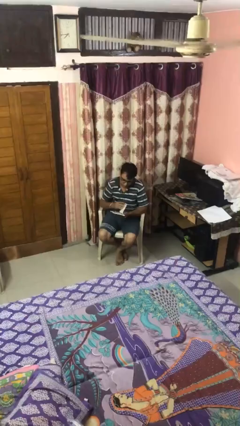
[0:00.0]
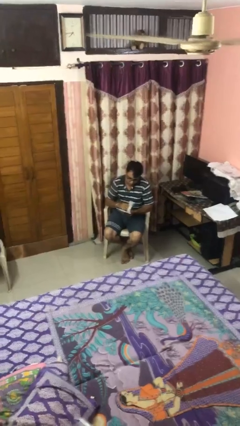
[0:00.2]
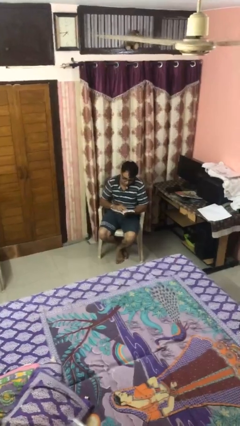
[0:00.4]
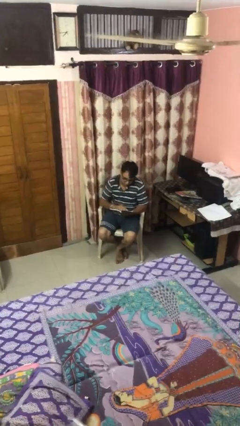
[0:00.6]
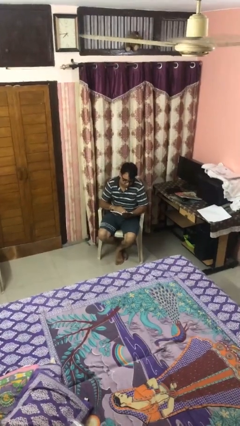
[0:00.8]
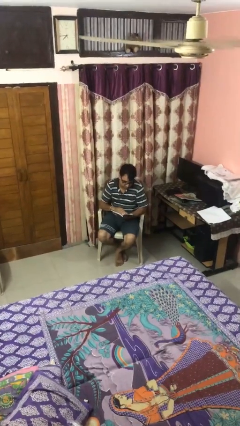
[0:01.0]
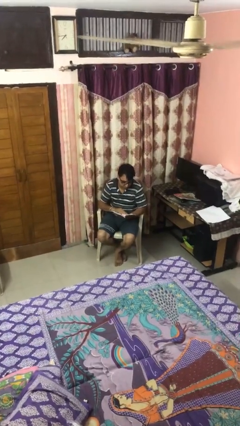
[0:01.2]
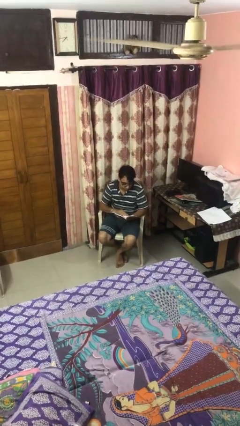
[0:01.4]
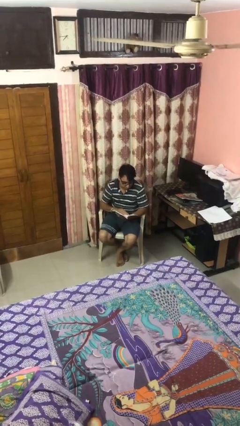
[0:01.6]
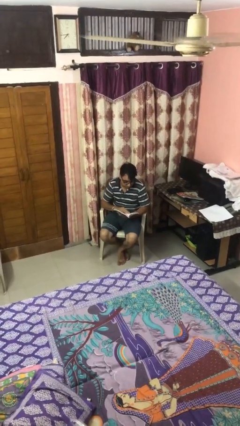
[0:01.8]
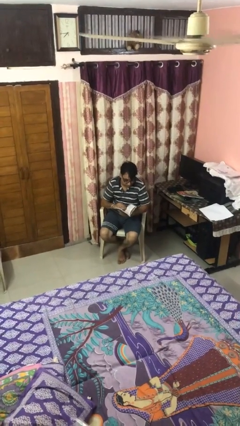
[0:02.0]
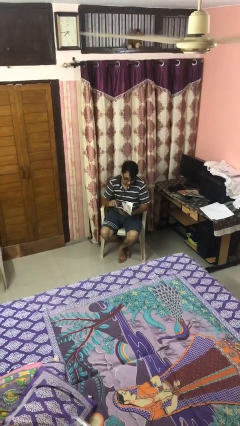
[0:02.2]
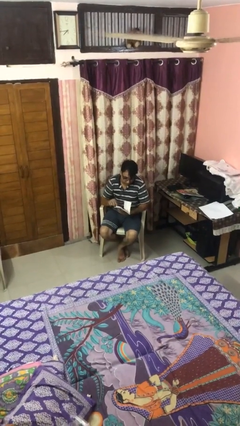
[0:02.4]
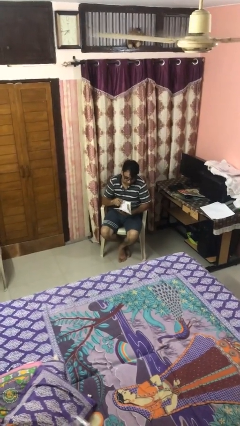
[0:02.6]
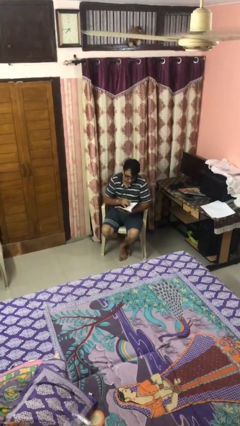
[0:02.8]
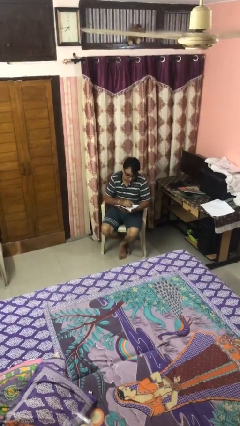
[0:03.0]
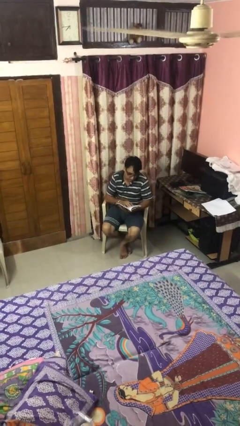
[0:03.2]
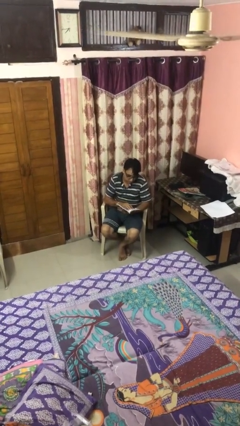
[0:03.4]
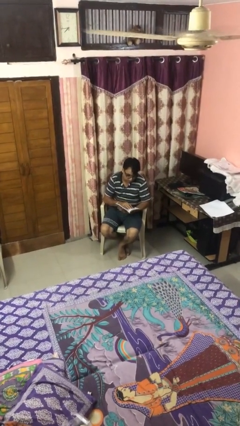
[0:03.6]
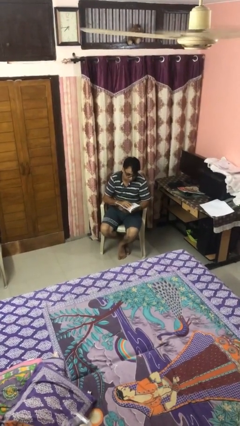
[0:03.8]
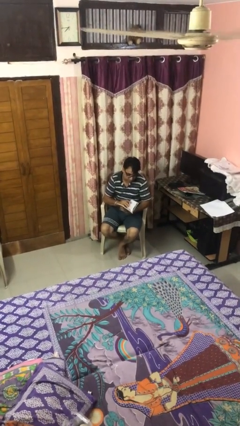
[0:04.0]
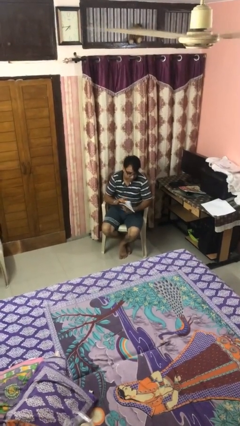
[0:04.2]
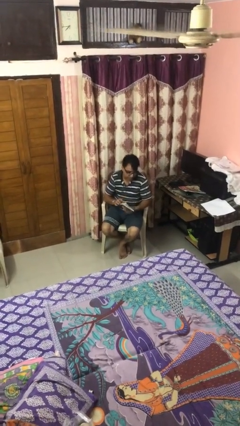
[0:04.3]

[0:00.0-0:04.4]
person reads book

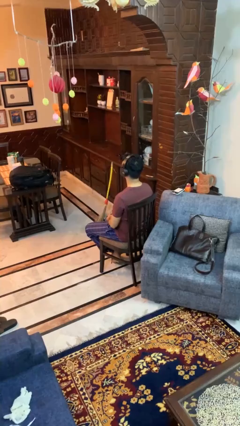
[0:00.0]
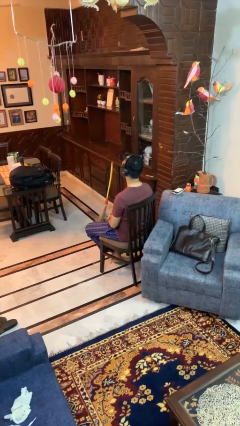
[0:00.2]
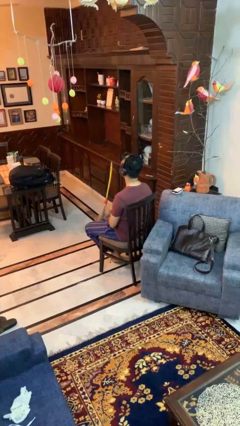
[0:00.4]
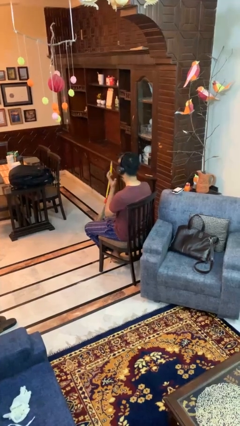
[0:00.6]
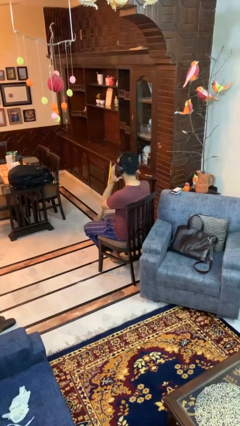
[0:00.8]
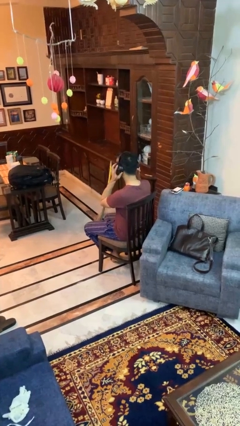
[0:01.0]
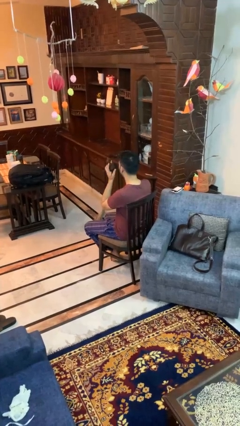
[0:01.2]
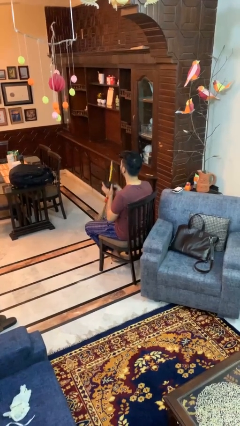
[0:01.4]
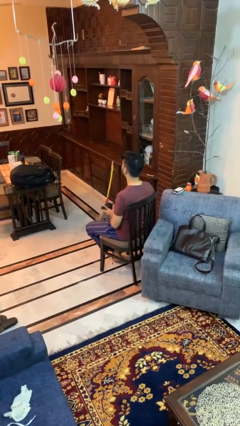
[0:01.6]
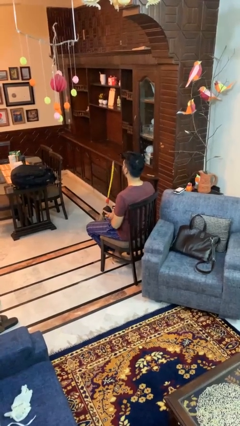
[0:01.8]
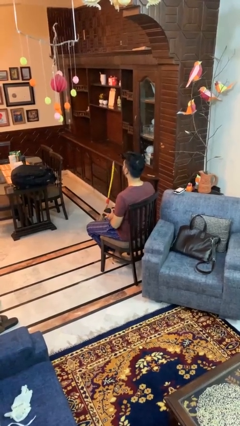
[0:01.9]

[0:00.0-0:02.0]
person takes off headphones

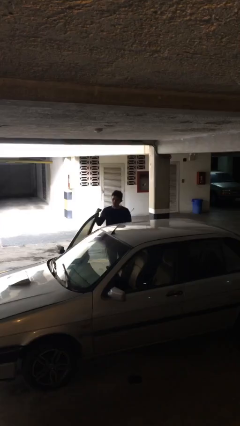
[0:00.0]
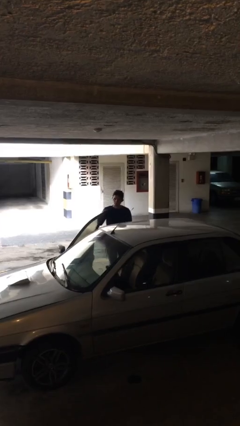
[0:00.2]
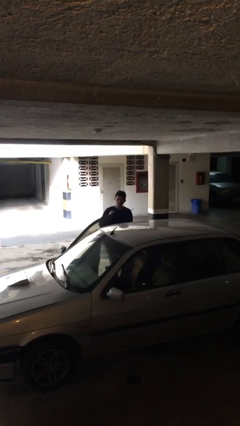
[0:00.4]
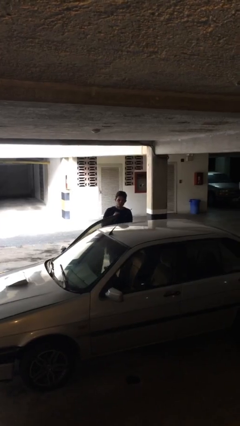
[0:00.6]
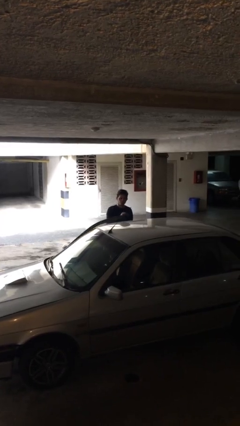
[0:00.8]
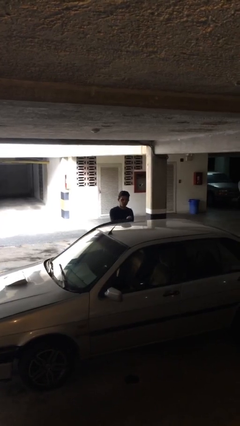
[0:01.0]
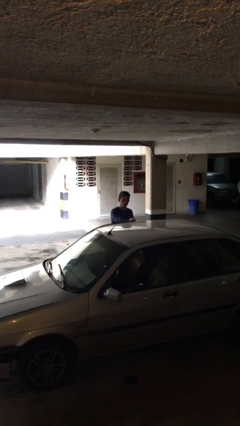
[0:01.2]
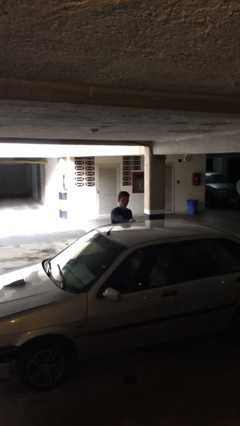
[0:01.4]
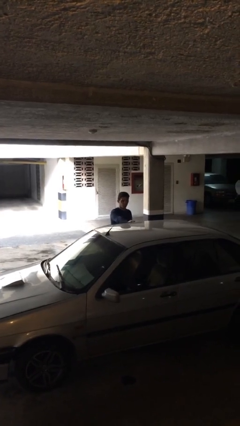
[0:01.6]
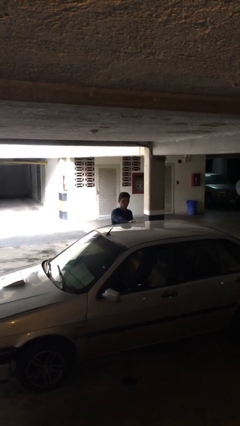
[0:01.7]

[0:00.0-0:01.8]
person closes car door

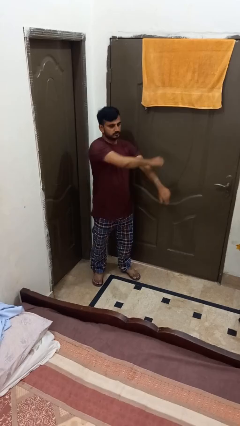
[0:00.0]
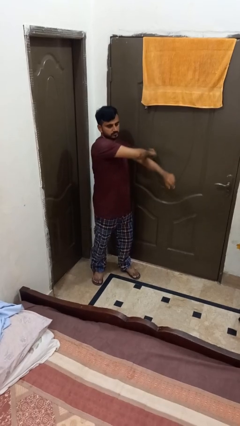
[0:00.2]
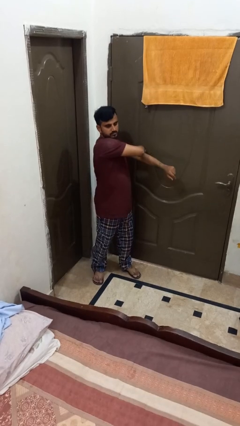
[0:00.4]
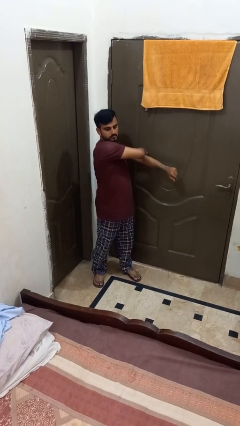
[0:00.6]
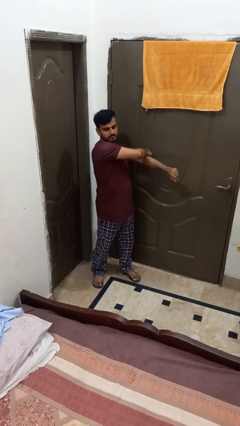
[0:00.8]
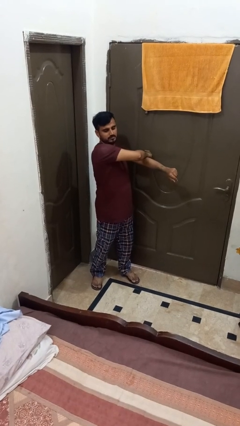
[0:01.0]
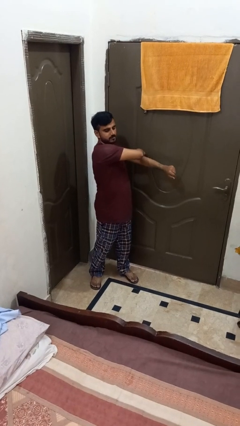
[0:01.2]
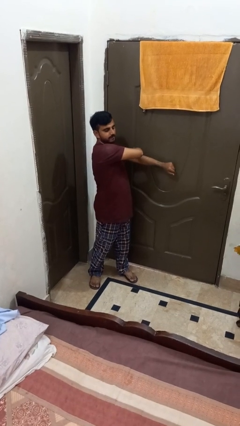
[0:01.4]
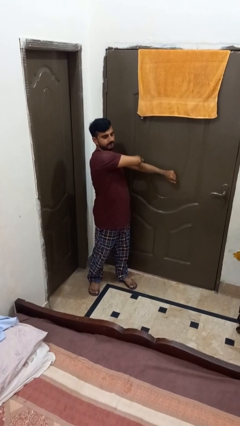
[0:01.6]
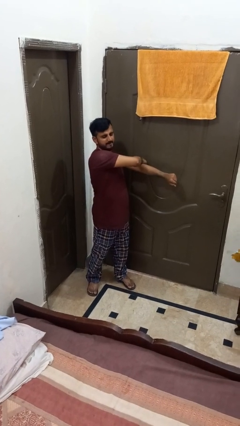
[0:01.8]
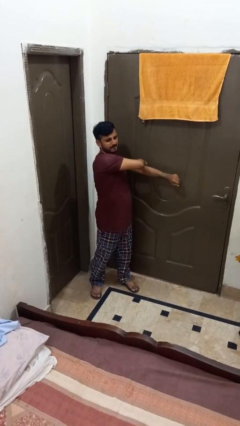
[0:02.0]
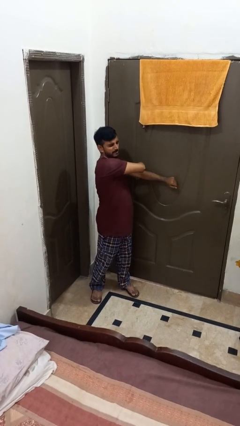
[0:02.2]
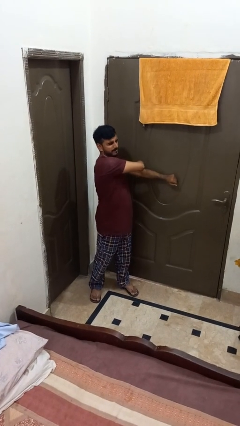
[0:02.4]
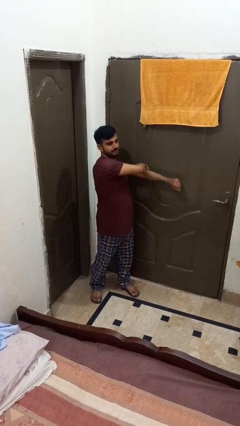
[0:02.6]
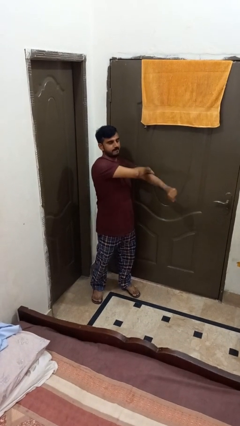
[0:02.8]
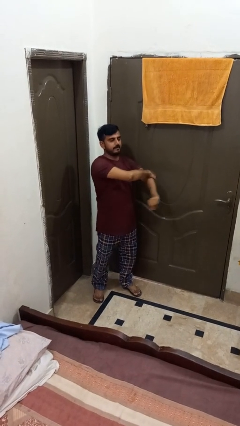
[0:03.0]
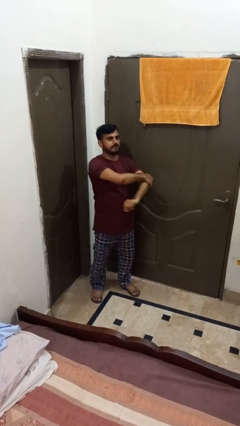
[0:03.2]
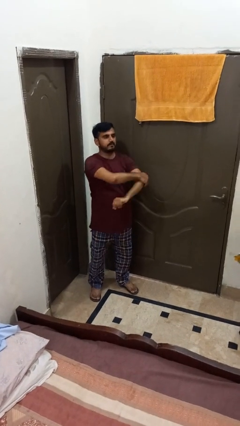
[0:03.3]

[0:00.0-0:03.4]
person stretches arms to side

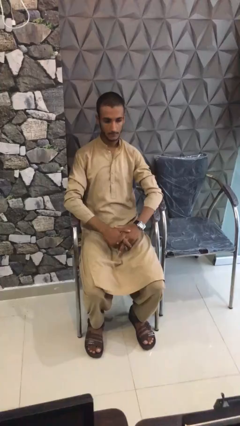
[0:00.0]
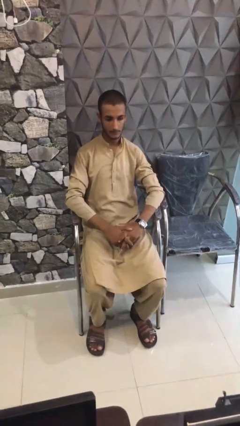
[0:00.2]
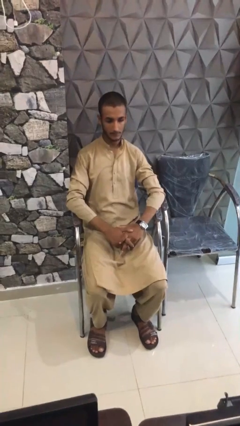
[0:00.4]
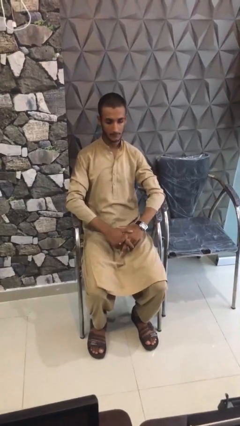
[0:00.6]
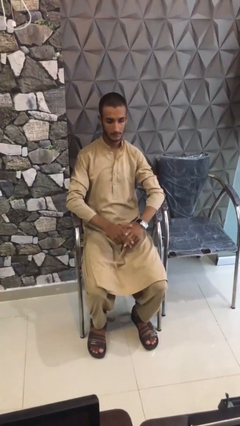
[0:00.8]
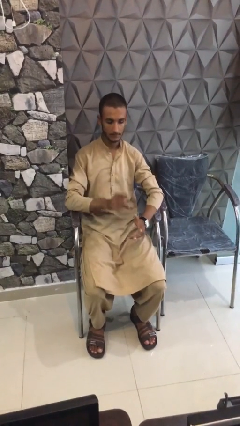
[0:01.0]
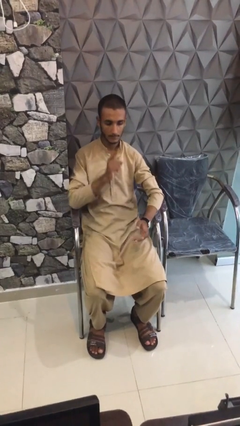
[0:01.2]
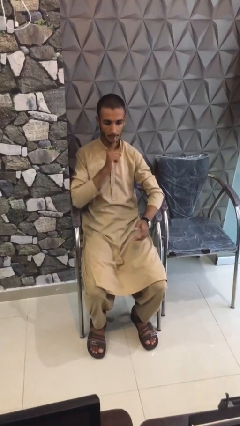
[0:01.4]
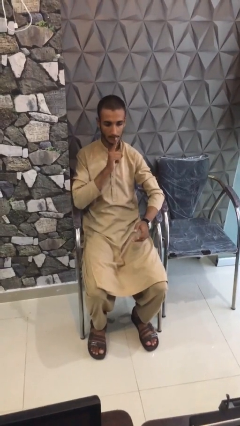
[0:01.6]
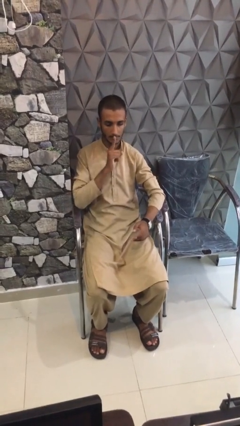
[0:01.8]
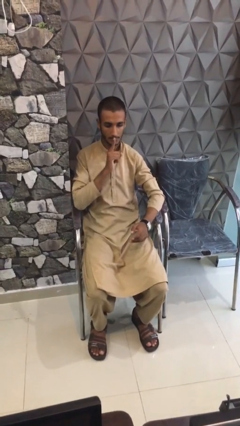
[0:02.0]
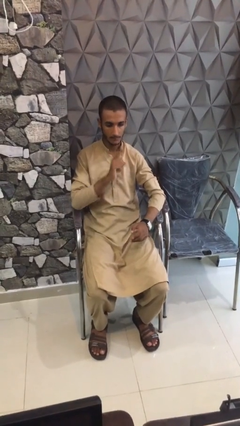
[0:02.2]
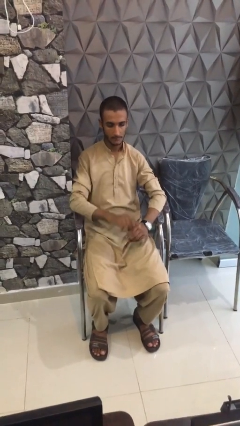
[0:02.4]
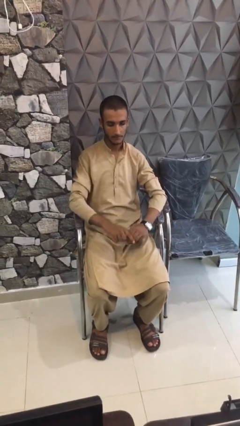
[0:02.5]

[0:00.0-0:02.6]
person gestures be quiet

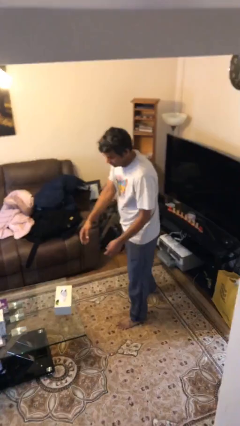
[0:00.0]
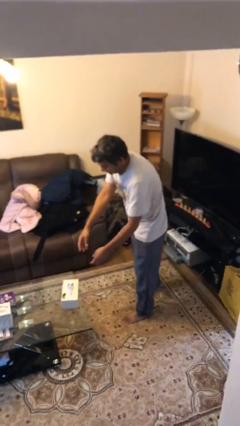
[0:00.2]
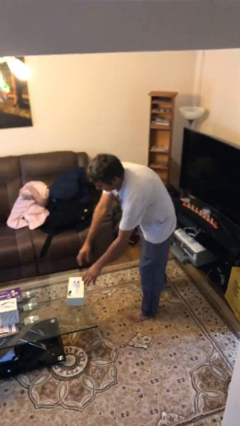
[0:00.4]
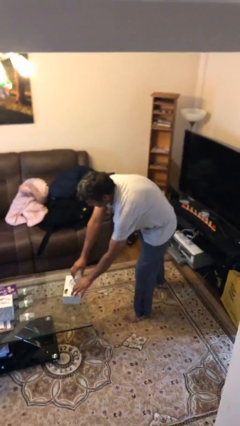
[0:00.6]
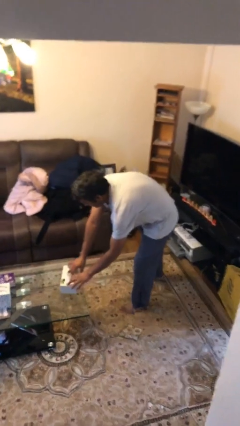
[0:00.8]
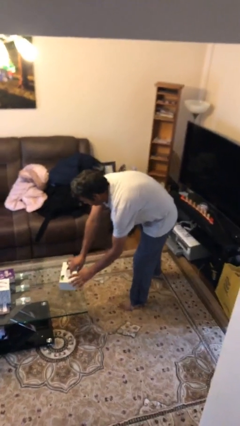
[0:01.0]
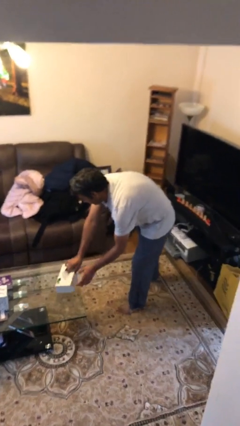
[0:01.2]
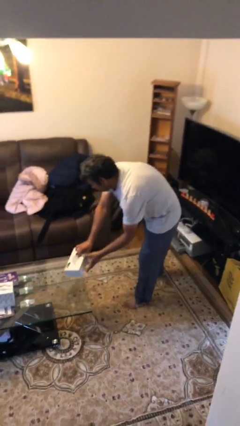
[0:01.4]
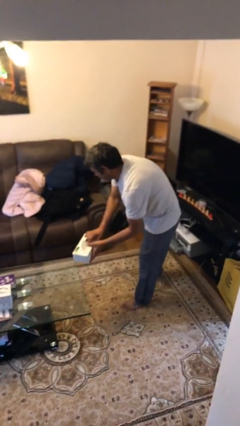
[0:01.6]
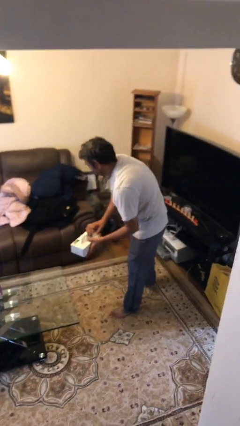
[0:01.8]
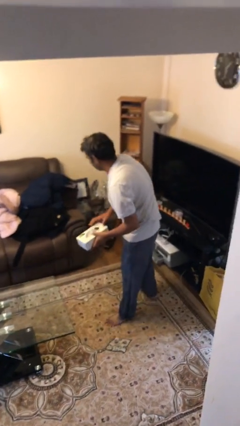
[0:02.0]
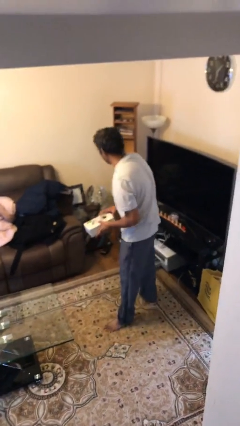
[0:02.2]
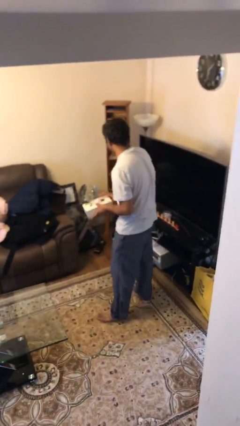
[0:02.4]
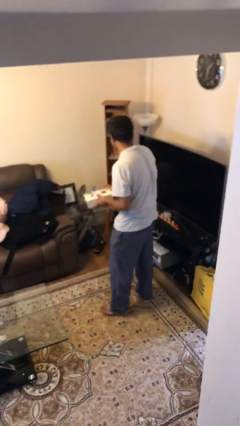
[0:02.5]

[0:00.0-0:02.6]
person picks up object from table

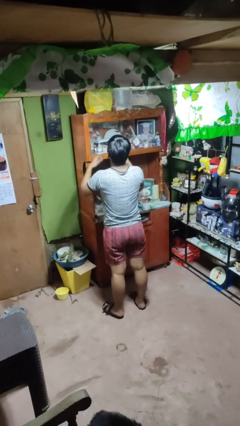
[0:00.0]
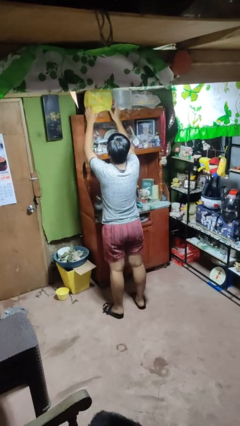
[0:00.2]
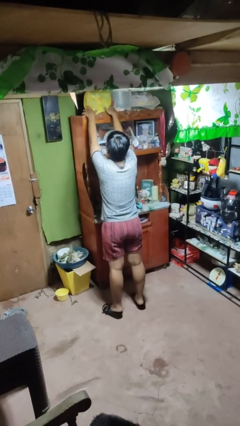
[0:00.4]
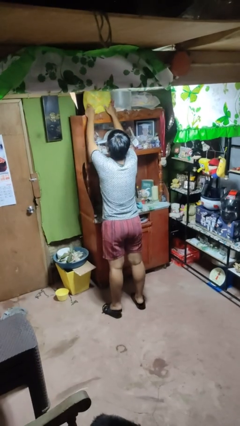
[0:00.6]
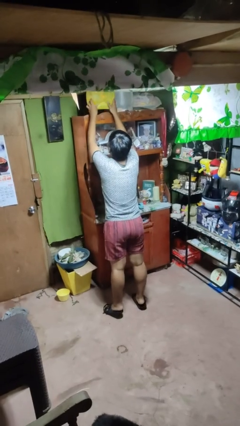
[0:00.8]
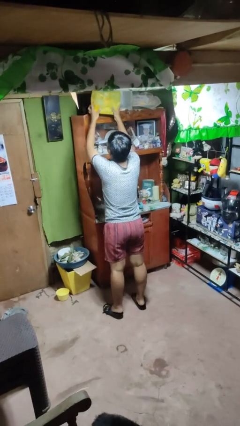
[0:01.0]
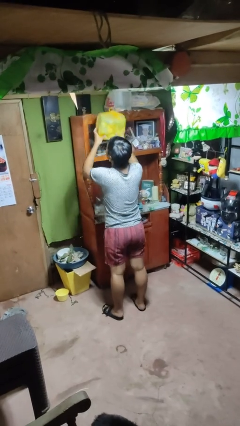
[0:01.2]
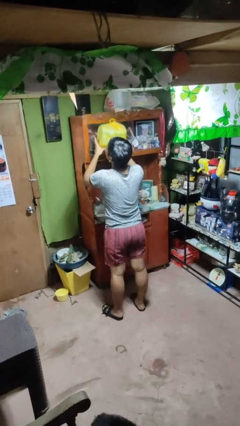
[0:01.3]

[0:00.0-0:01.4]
person picks up object from shelf
